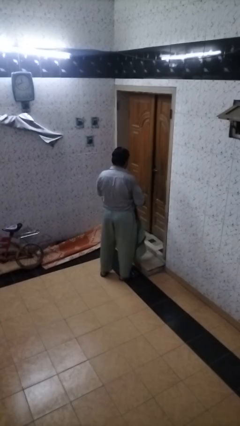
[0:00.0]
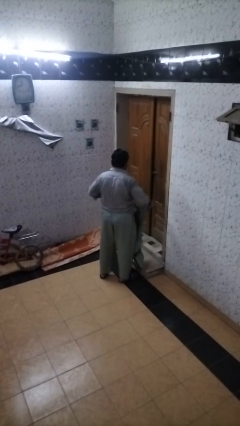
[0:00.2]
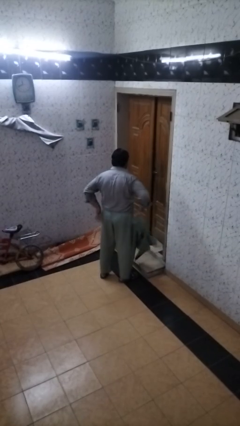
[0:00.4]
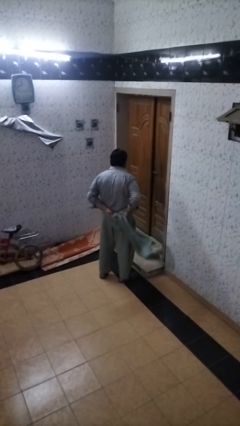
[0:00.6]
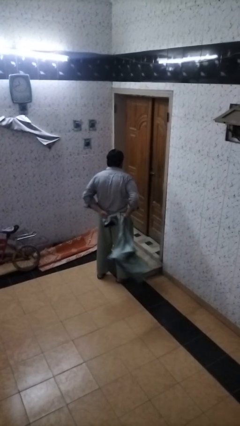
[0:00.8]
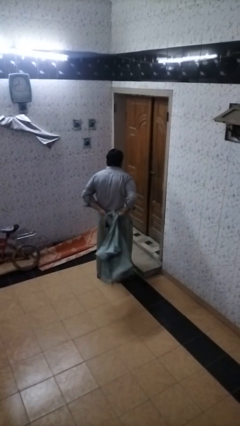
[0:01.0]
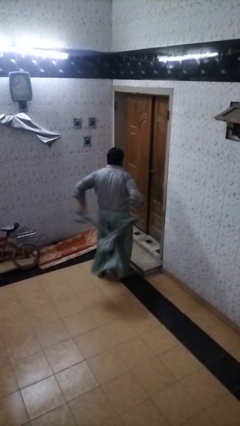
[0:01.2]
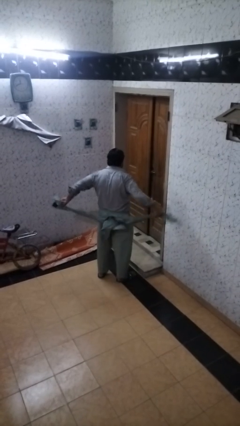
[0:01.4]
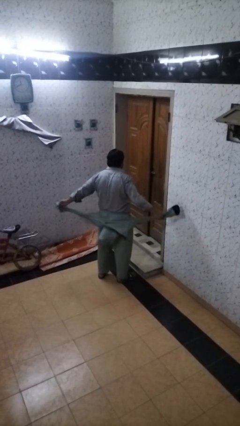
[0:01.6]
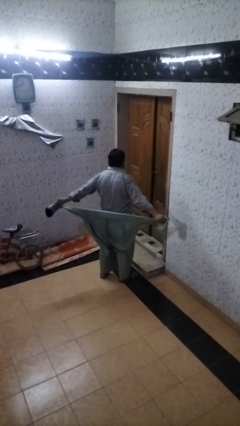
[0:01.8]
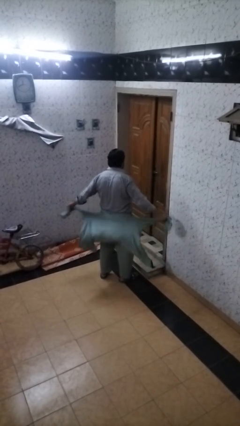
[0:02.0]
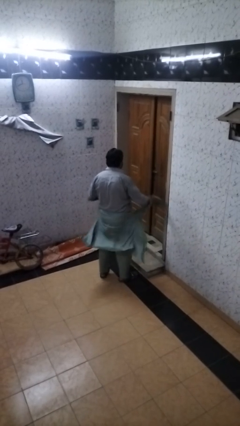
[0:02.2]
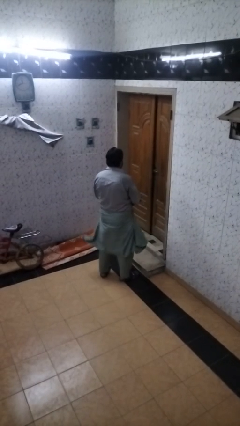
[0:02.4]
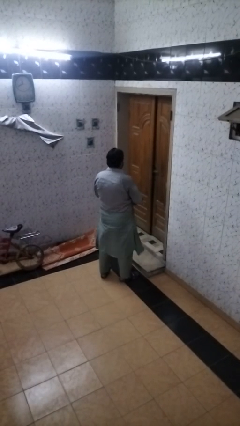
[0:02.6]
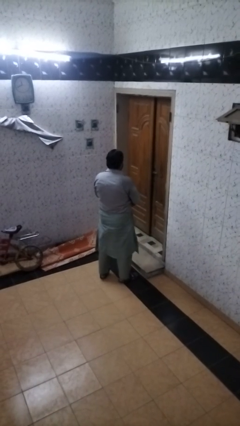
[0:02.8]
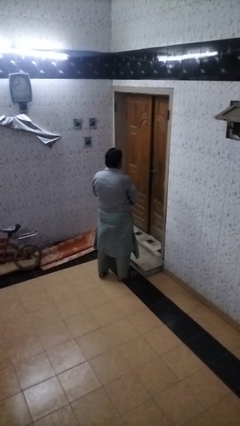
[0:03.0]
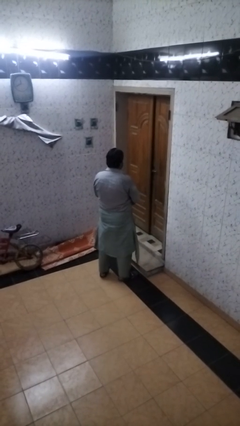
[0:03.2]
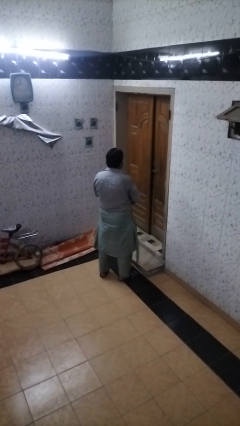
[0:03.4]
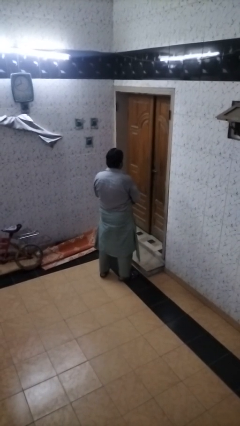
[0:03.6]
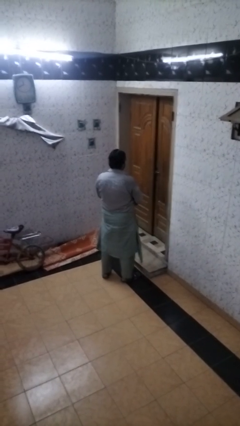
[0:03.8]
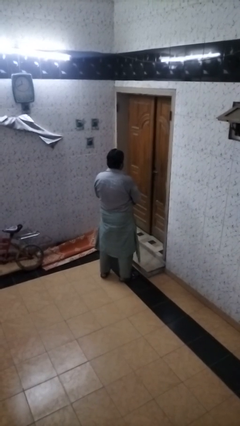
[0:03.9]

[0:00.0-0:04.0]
person ties jacket around waist

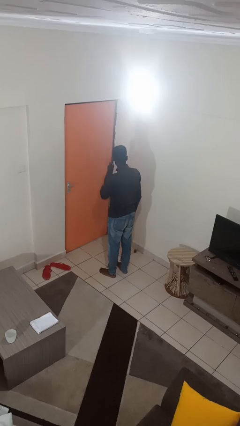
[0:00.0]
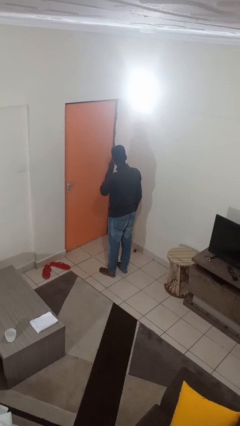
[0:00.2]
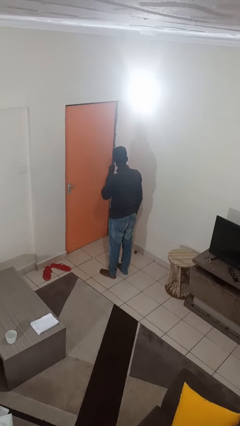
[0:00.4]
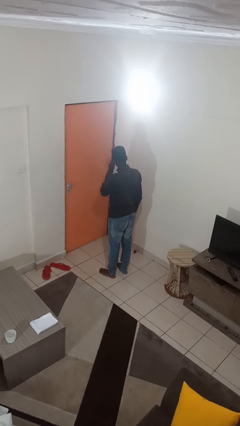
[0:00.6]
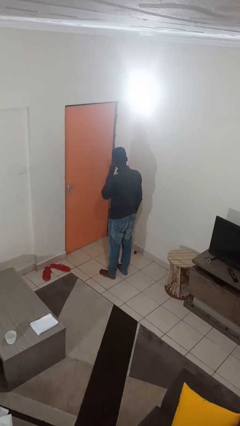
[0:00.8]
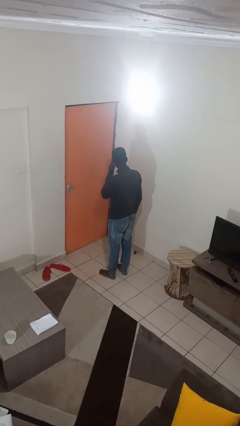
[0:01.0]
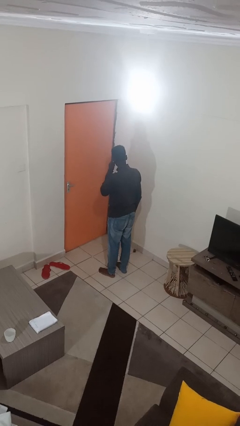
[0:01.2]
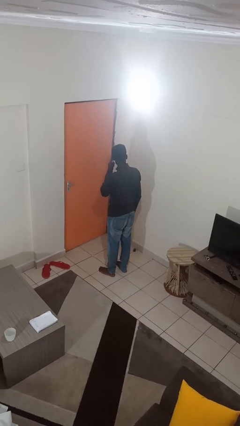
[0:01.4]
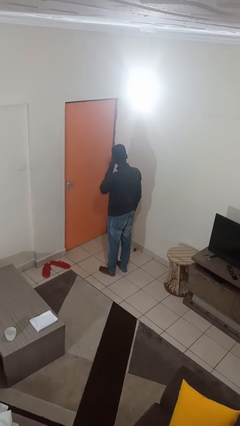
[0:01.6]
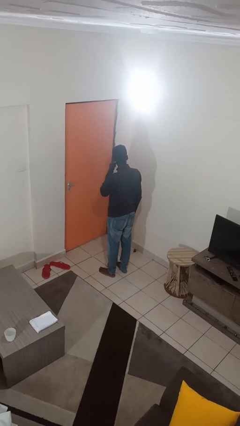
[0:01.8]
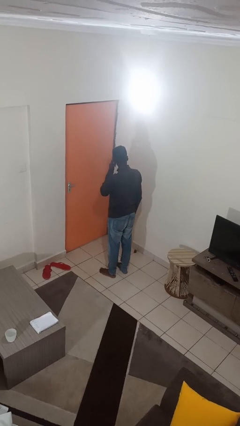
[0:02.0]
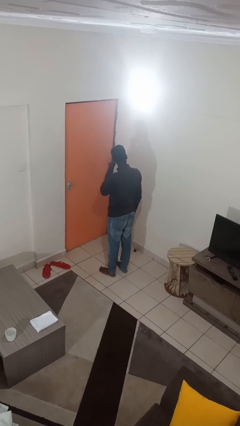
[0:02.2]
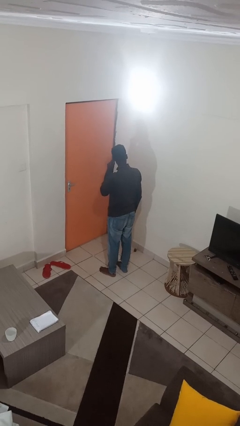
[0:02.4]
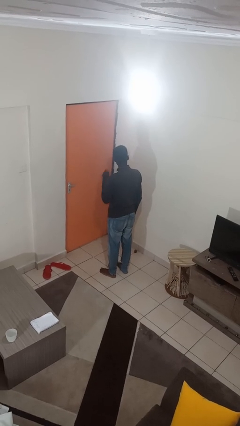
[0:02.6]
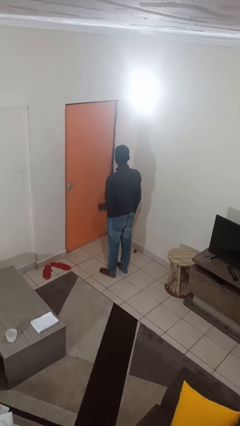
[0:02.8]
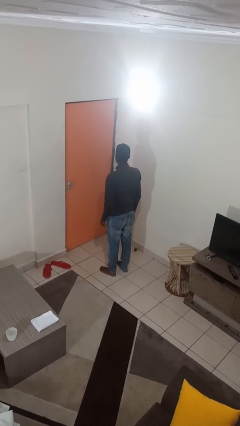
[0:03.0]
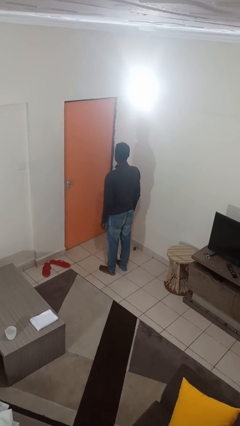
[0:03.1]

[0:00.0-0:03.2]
person touches earlobe

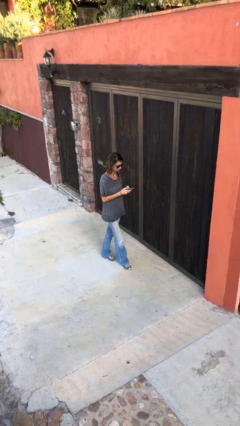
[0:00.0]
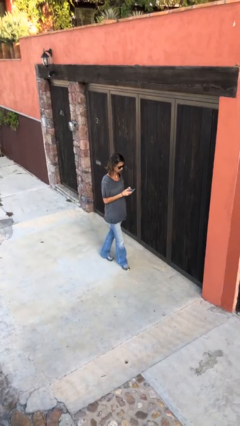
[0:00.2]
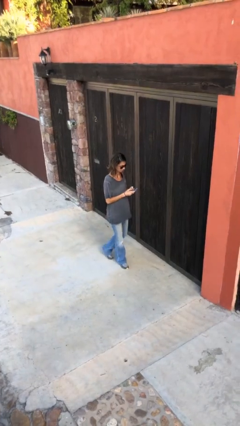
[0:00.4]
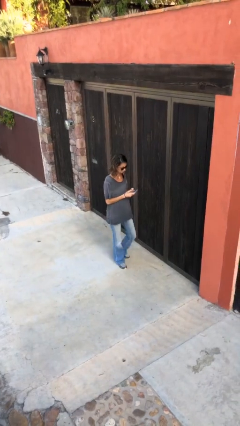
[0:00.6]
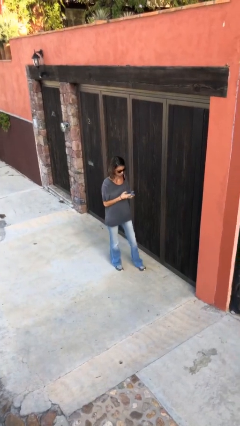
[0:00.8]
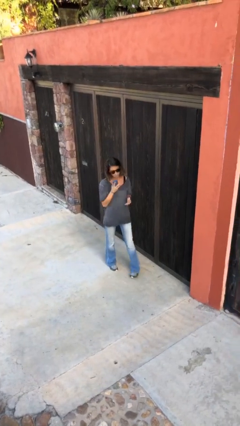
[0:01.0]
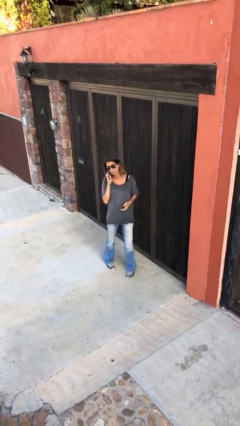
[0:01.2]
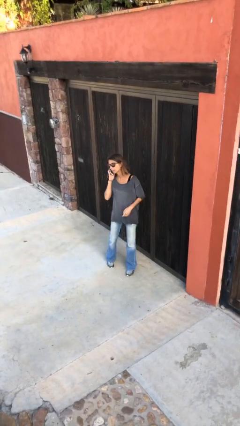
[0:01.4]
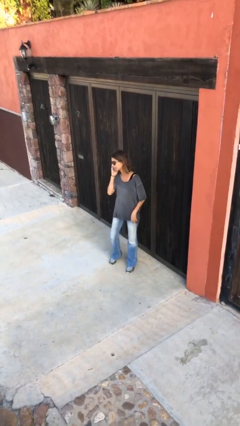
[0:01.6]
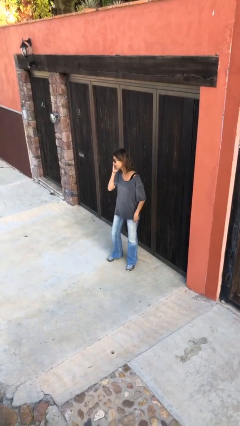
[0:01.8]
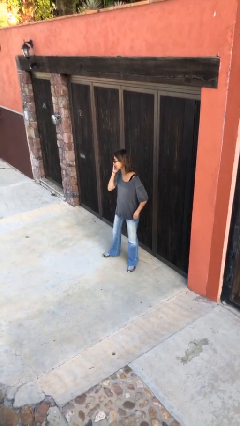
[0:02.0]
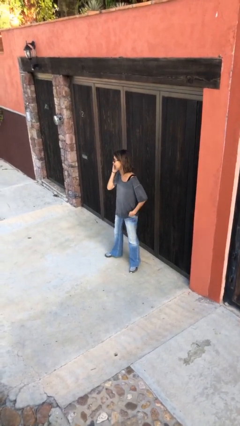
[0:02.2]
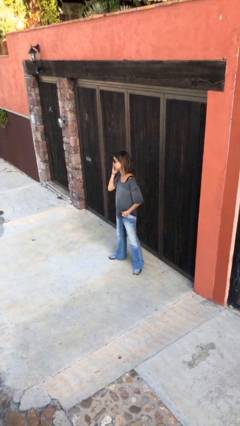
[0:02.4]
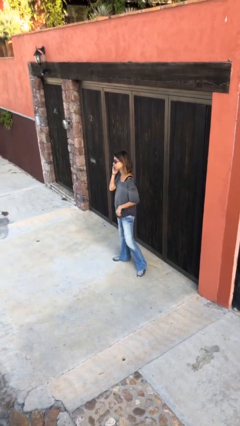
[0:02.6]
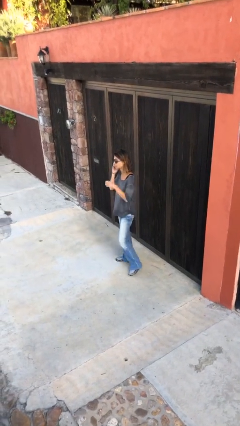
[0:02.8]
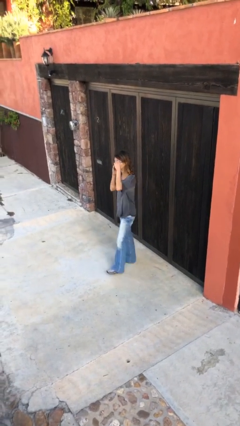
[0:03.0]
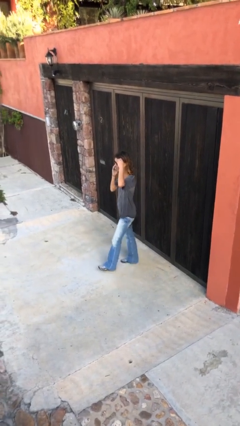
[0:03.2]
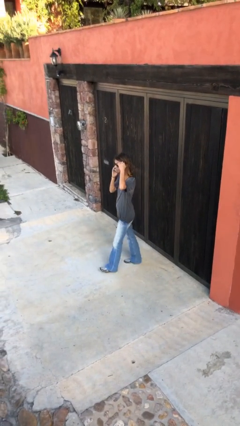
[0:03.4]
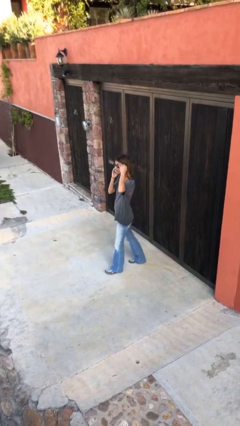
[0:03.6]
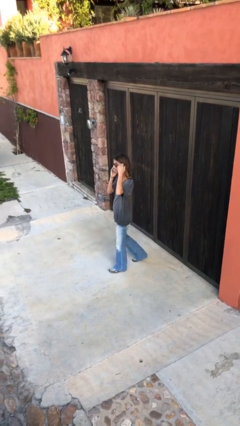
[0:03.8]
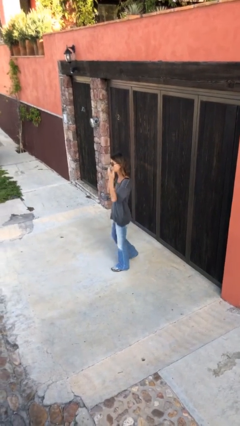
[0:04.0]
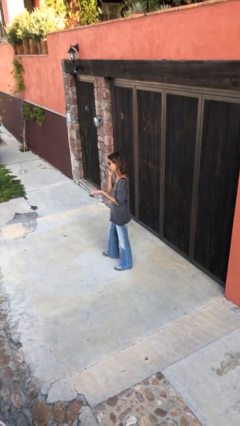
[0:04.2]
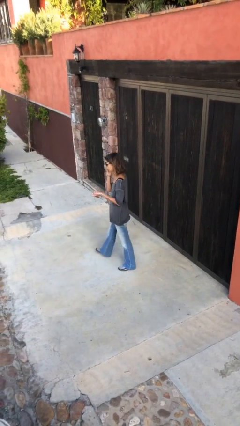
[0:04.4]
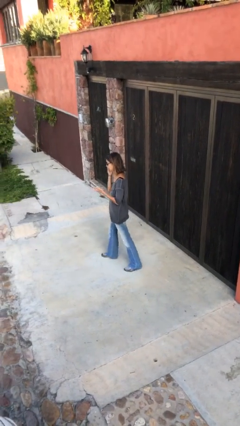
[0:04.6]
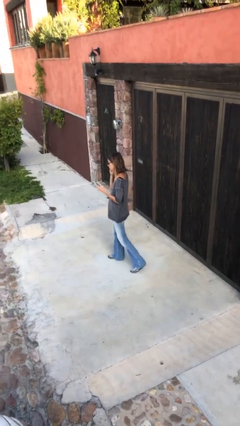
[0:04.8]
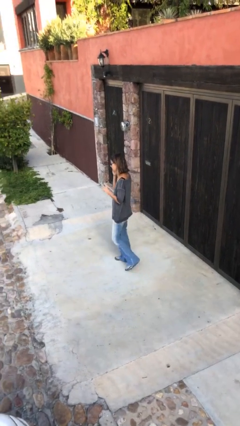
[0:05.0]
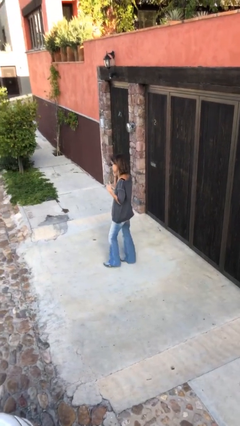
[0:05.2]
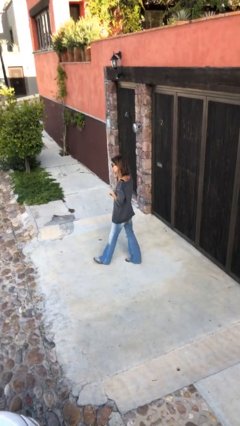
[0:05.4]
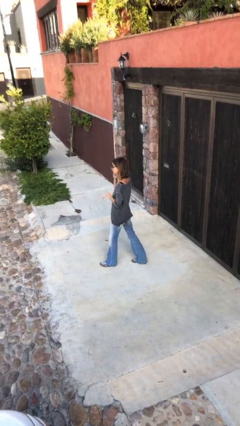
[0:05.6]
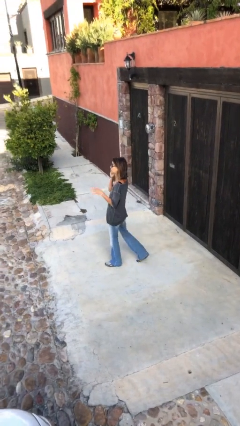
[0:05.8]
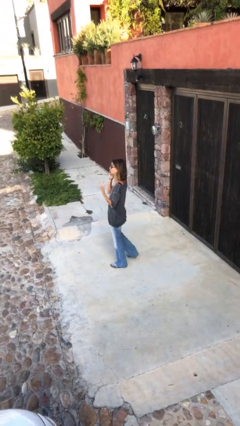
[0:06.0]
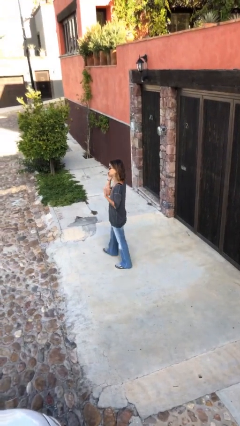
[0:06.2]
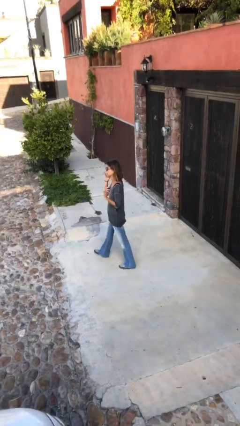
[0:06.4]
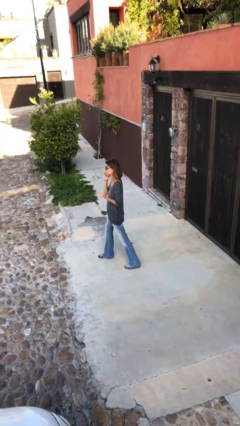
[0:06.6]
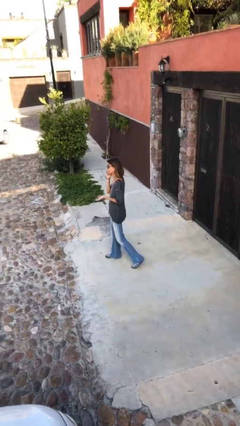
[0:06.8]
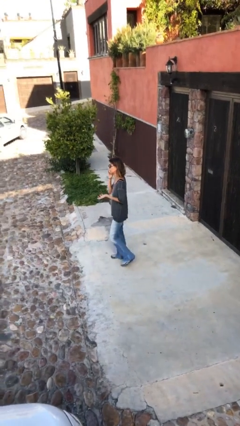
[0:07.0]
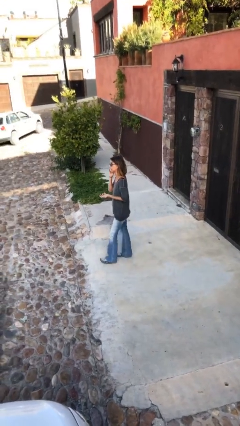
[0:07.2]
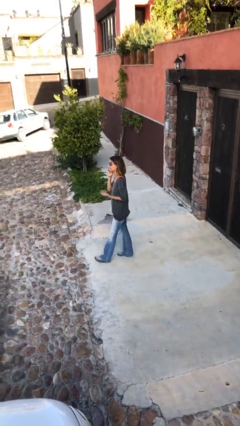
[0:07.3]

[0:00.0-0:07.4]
person talks on phone

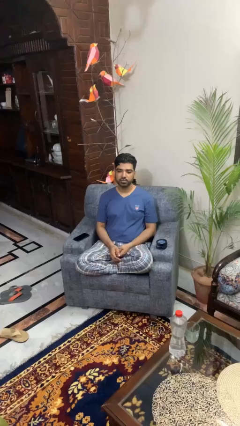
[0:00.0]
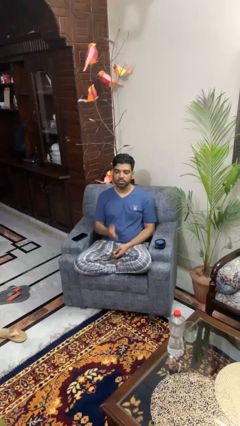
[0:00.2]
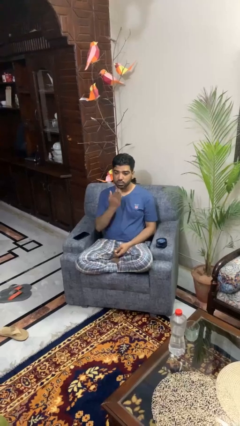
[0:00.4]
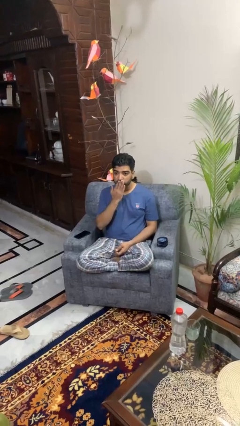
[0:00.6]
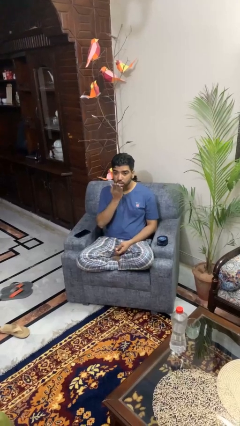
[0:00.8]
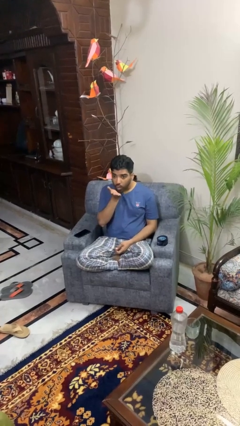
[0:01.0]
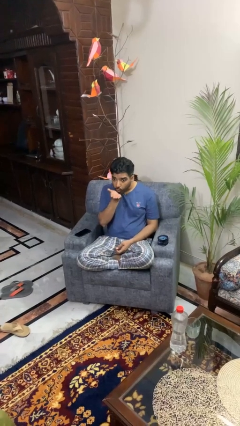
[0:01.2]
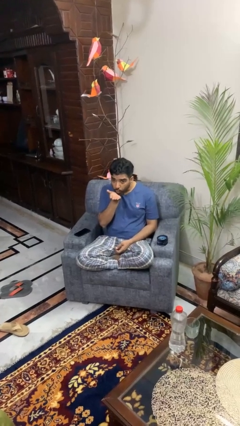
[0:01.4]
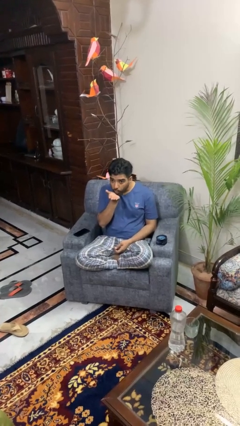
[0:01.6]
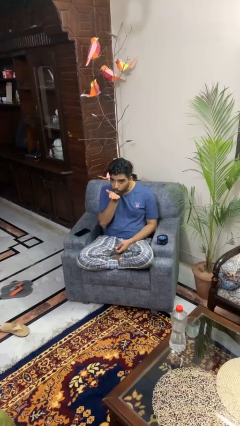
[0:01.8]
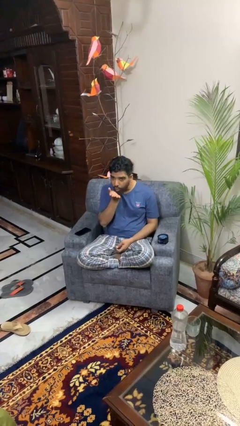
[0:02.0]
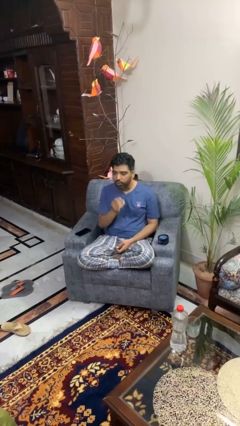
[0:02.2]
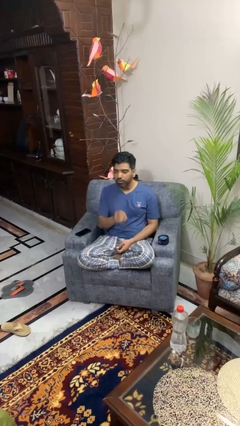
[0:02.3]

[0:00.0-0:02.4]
person gestures blow kiss

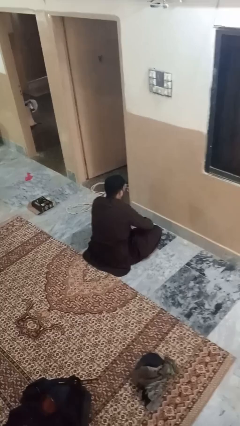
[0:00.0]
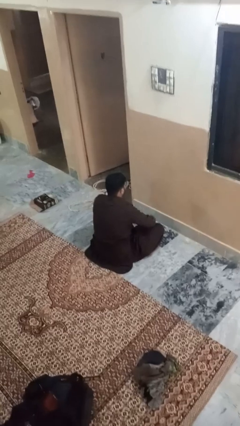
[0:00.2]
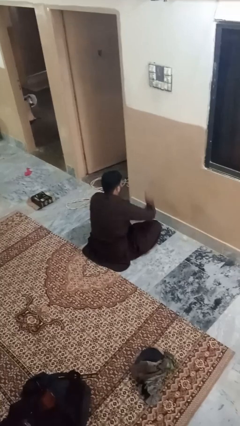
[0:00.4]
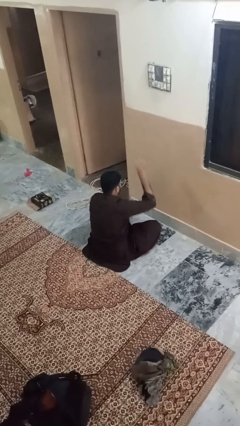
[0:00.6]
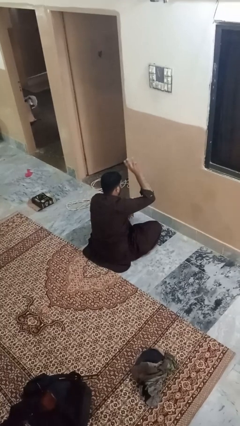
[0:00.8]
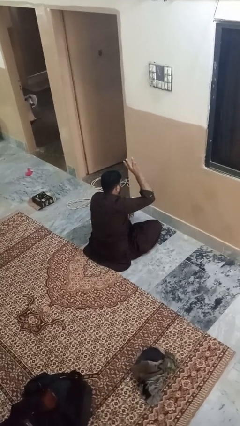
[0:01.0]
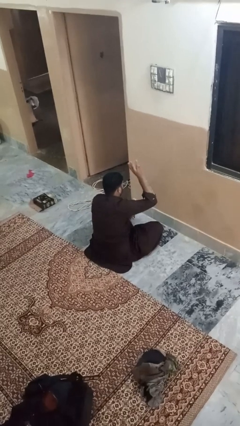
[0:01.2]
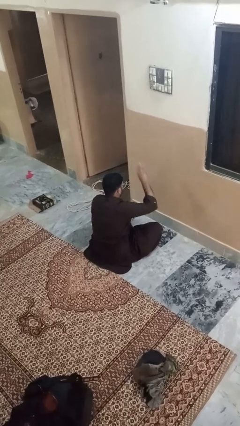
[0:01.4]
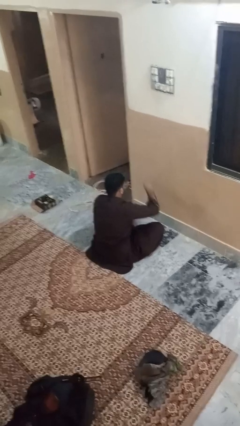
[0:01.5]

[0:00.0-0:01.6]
person gestures number three
